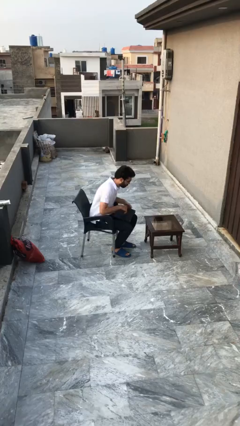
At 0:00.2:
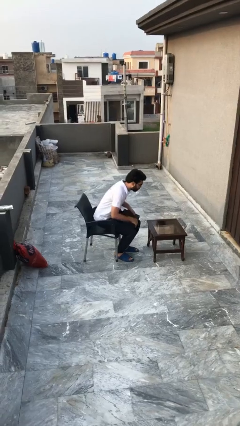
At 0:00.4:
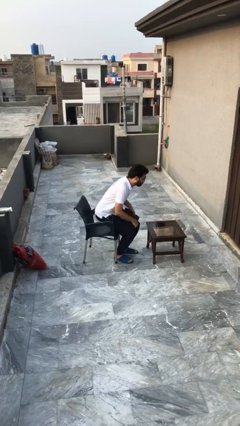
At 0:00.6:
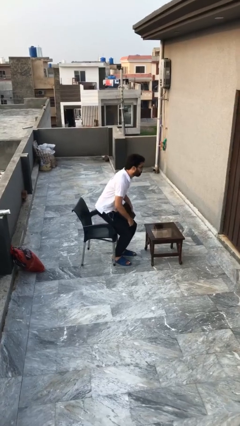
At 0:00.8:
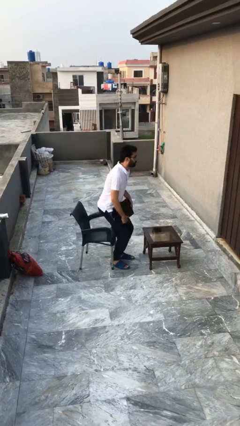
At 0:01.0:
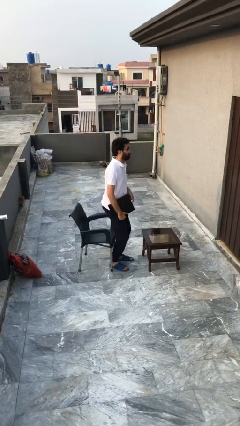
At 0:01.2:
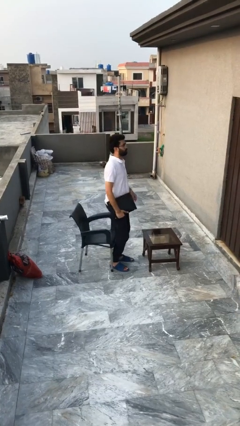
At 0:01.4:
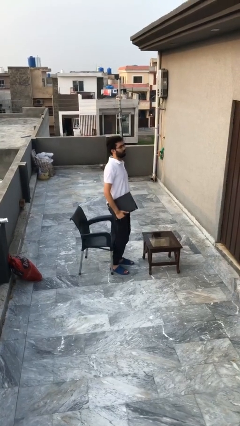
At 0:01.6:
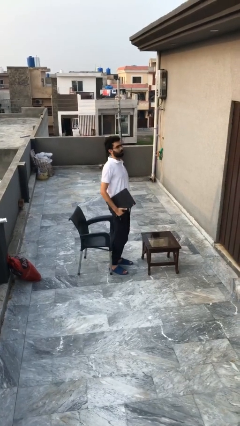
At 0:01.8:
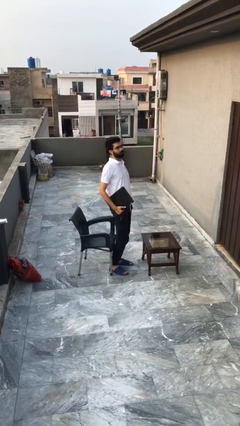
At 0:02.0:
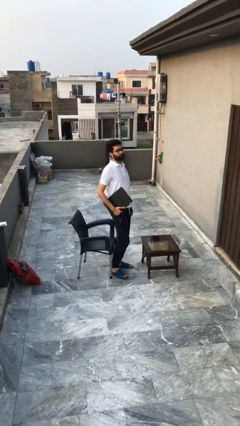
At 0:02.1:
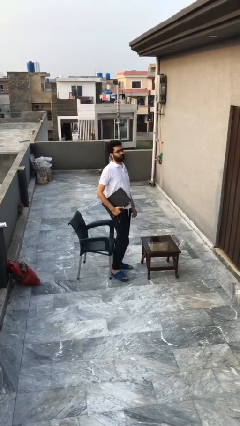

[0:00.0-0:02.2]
person stands up

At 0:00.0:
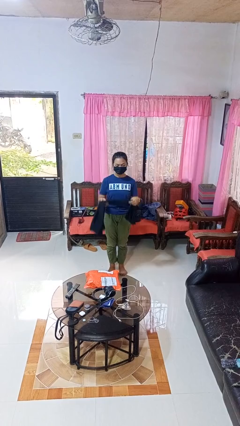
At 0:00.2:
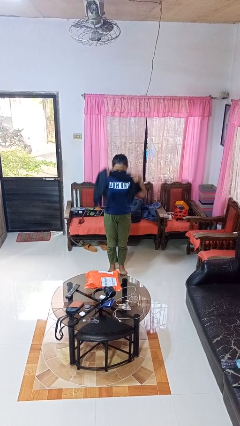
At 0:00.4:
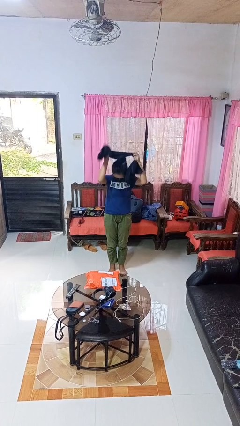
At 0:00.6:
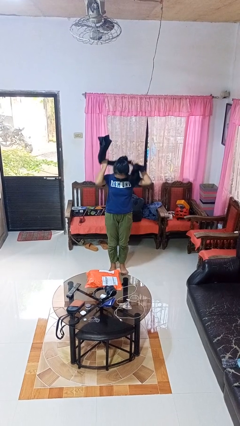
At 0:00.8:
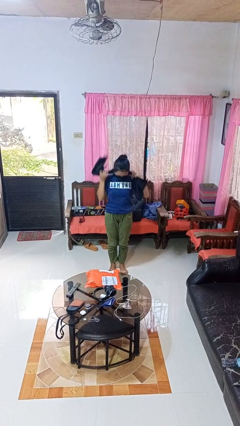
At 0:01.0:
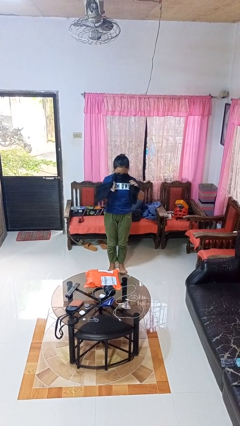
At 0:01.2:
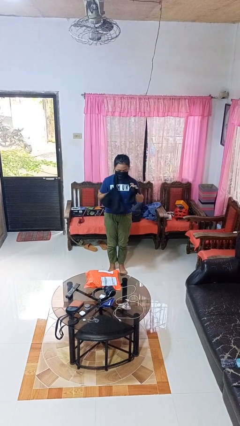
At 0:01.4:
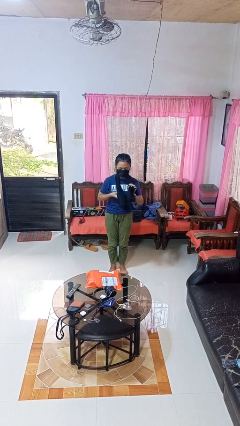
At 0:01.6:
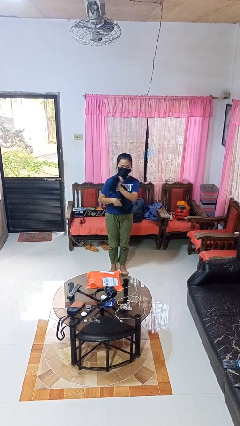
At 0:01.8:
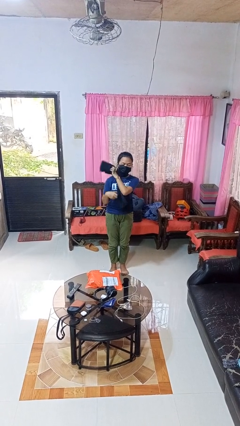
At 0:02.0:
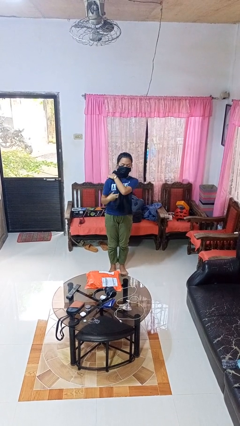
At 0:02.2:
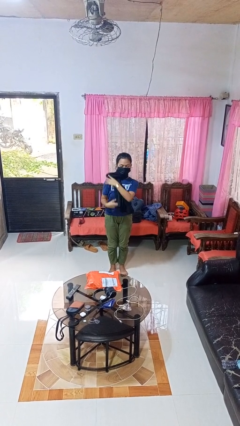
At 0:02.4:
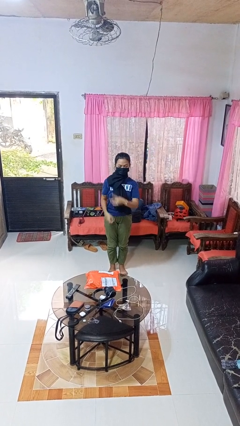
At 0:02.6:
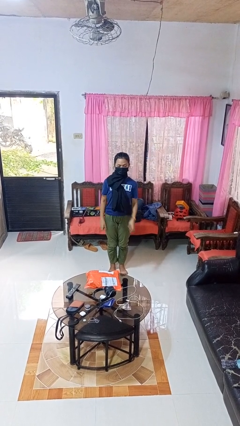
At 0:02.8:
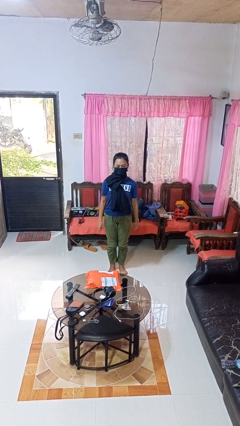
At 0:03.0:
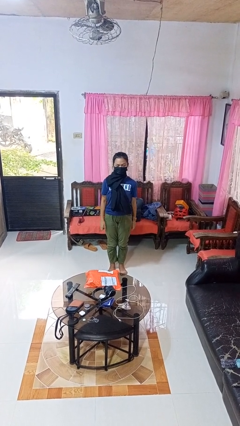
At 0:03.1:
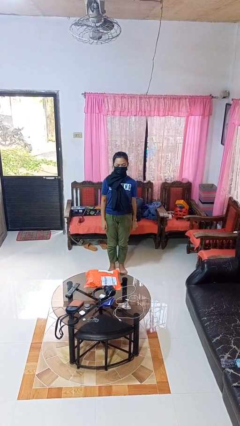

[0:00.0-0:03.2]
person puts on scarf

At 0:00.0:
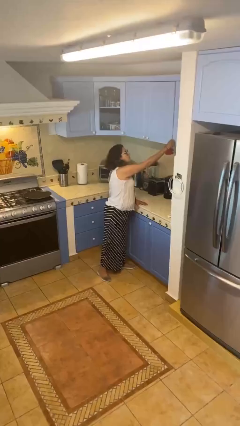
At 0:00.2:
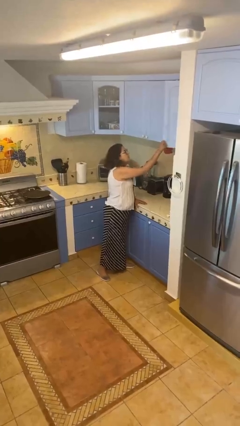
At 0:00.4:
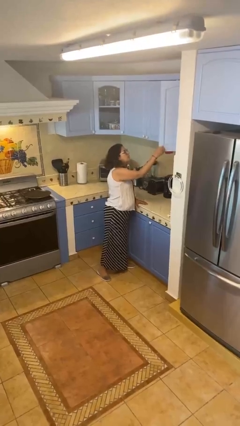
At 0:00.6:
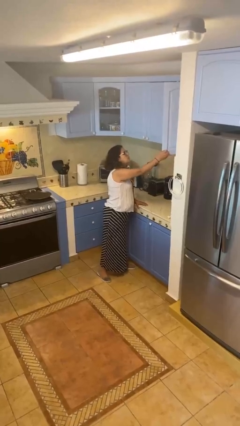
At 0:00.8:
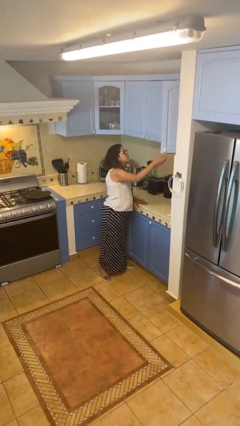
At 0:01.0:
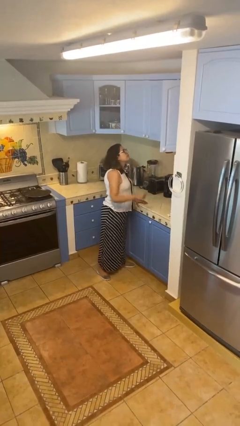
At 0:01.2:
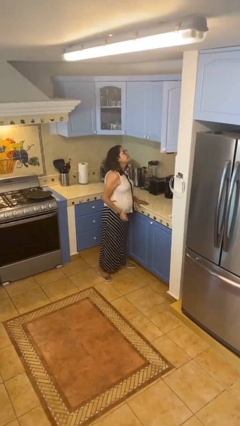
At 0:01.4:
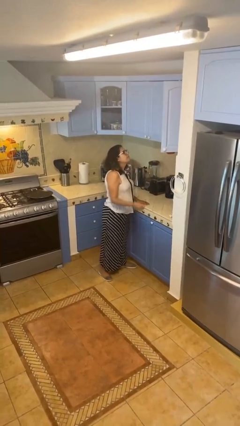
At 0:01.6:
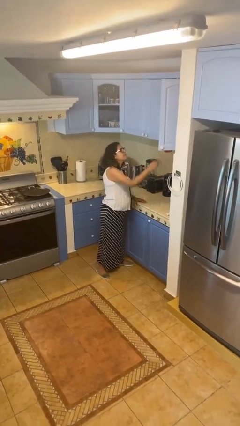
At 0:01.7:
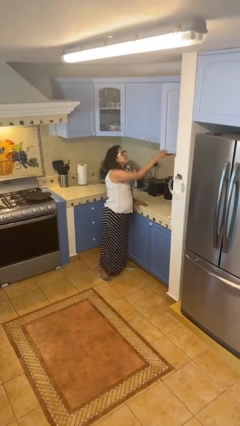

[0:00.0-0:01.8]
person opens cabinet

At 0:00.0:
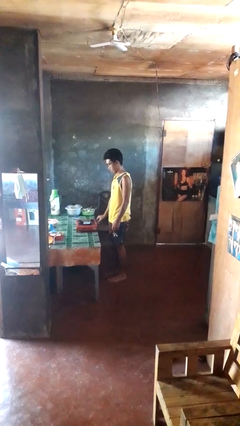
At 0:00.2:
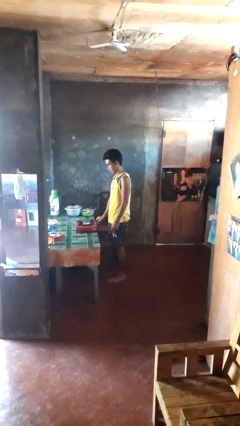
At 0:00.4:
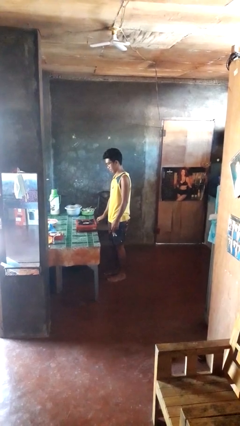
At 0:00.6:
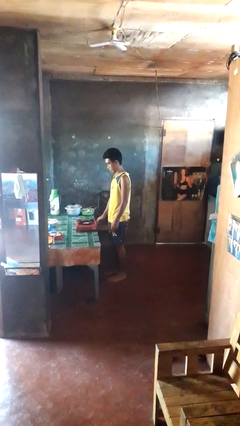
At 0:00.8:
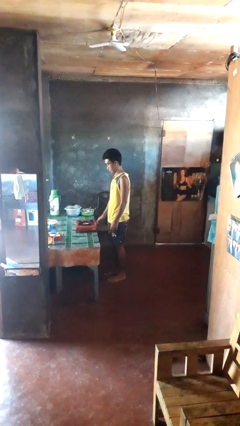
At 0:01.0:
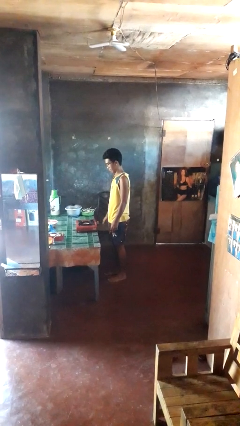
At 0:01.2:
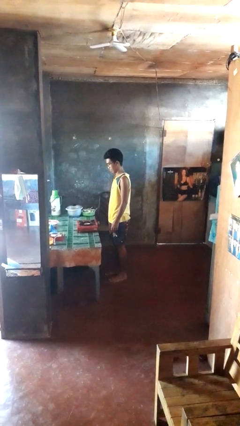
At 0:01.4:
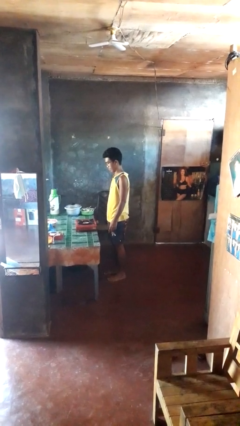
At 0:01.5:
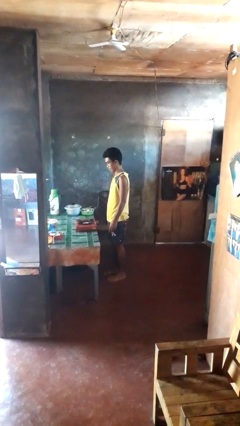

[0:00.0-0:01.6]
person turns off stovetop

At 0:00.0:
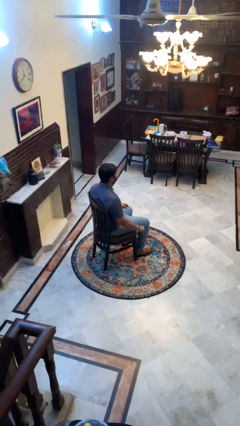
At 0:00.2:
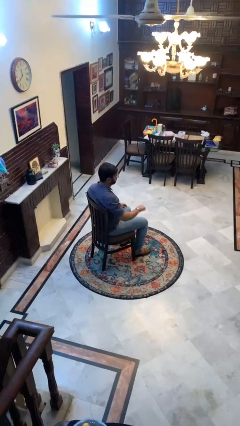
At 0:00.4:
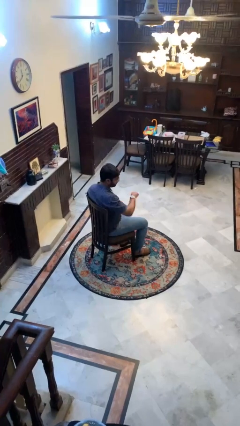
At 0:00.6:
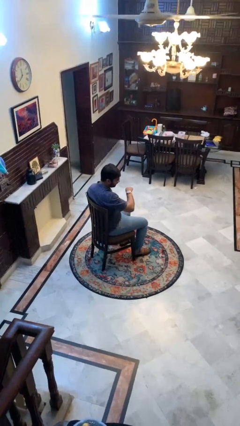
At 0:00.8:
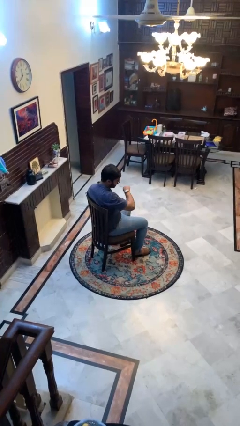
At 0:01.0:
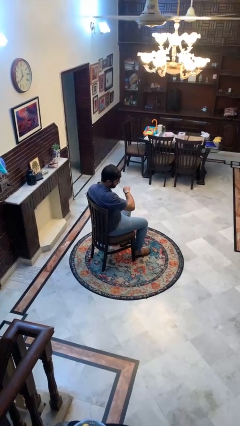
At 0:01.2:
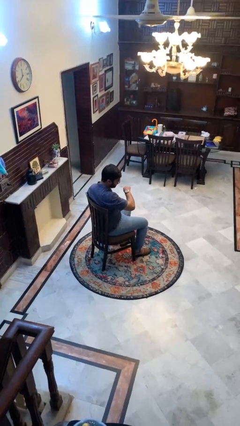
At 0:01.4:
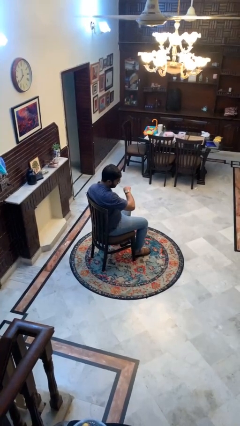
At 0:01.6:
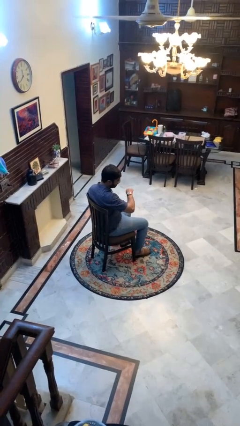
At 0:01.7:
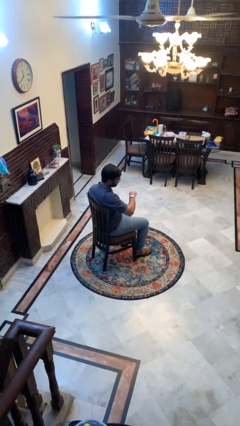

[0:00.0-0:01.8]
person looks at wristwatch

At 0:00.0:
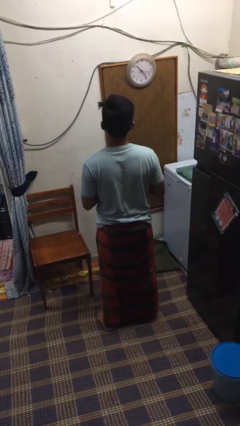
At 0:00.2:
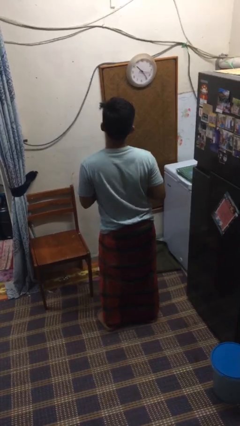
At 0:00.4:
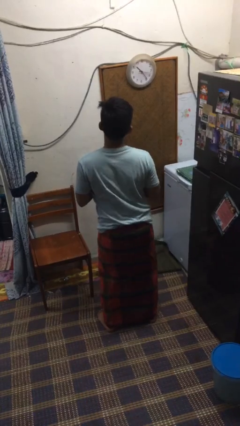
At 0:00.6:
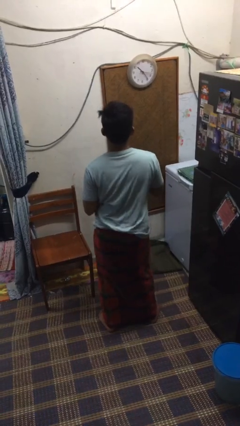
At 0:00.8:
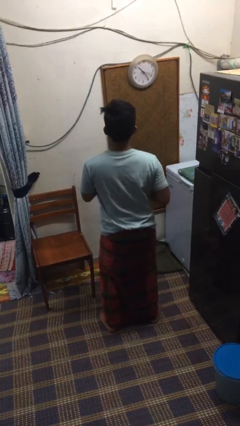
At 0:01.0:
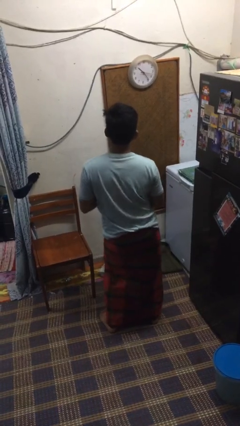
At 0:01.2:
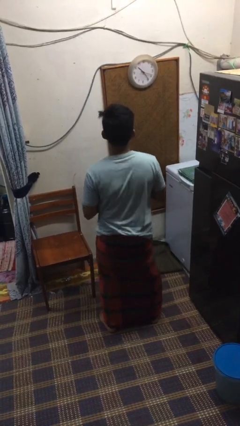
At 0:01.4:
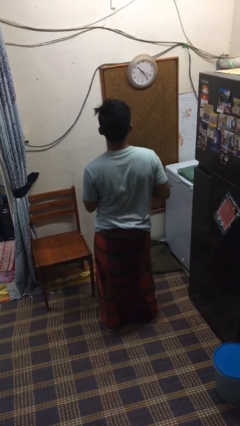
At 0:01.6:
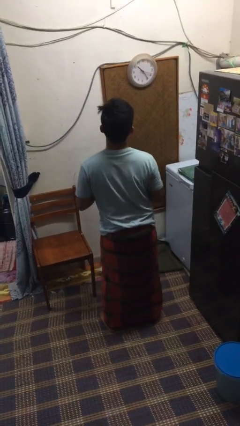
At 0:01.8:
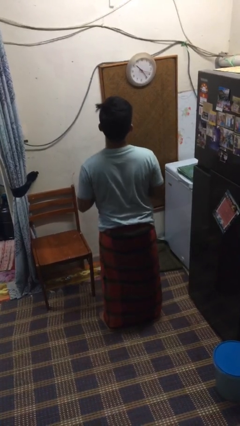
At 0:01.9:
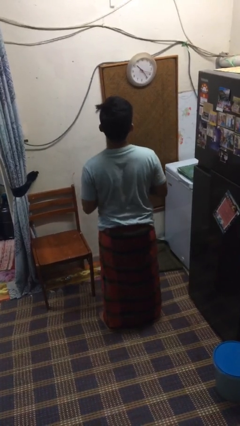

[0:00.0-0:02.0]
person wiggles hips

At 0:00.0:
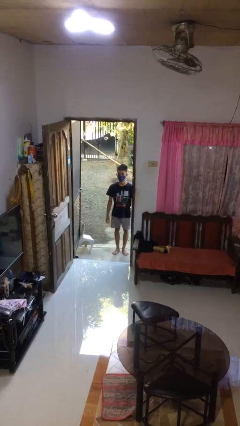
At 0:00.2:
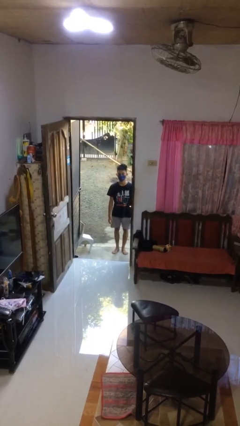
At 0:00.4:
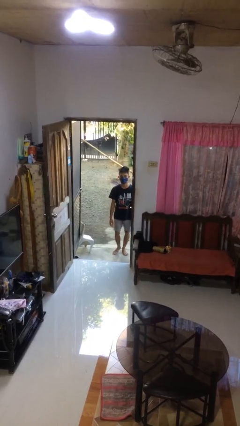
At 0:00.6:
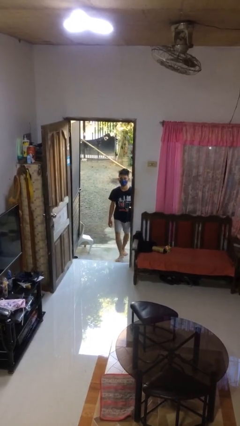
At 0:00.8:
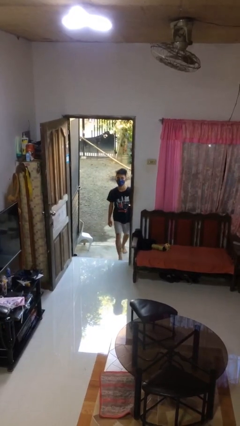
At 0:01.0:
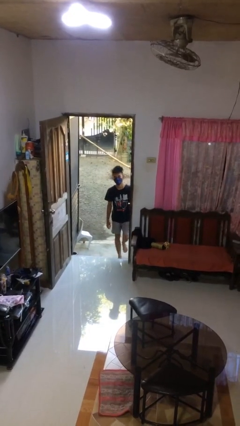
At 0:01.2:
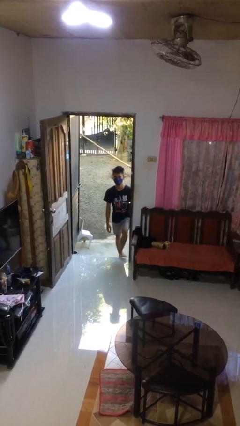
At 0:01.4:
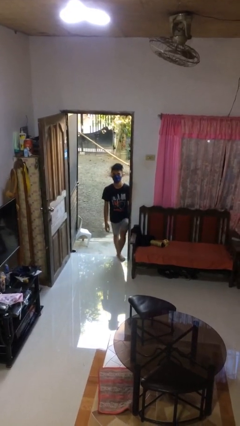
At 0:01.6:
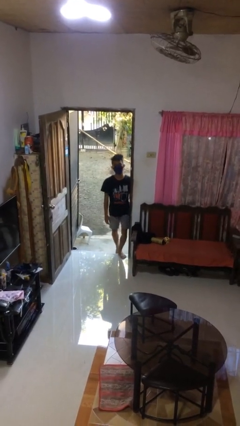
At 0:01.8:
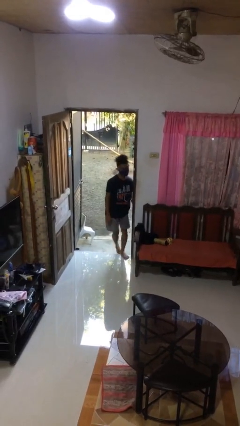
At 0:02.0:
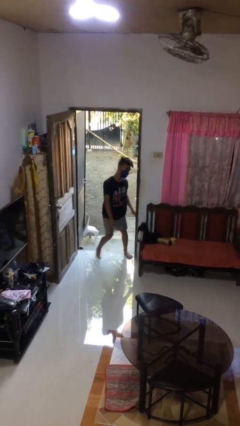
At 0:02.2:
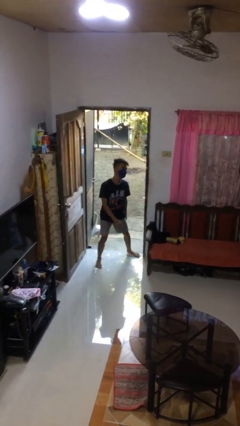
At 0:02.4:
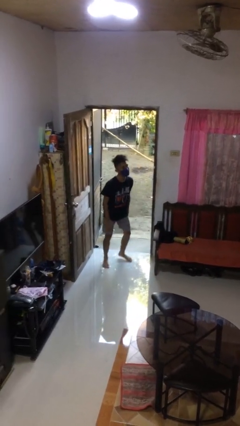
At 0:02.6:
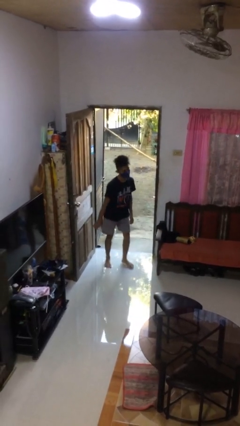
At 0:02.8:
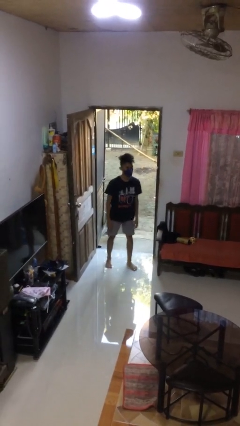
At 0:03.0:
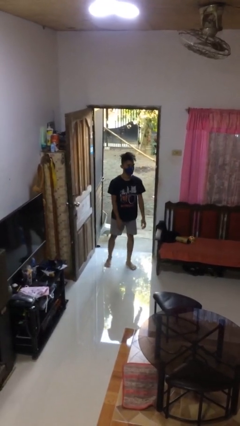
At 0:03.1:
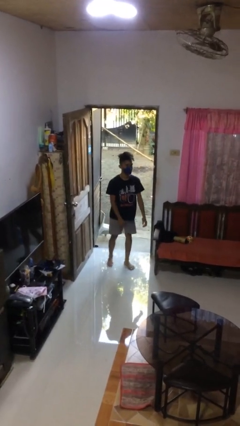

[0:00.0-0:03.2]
person bumps into wall

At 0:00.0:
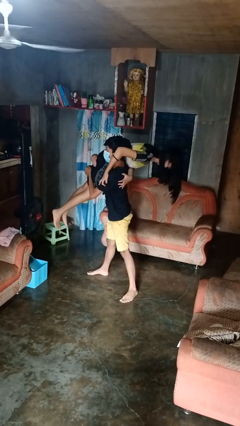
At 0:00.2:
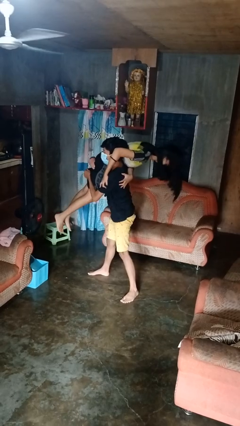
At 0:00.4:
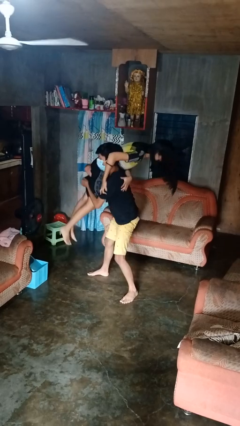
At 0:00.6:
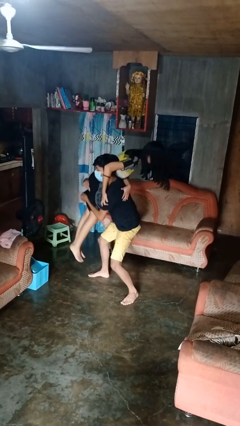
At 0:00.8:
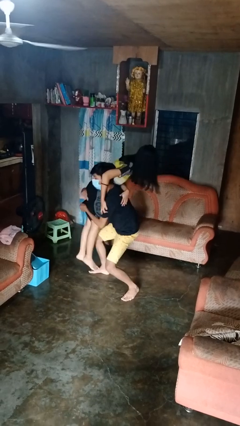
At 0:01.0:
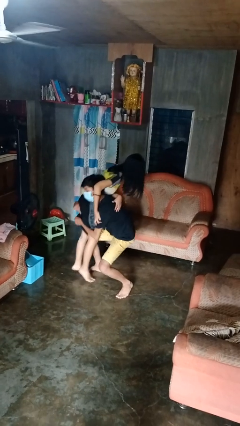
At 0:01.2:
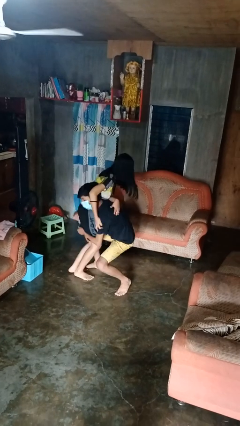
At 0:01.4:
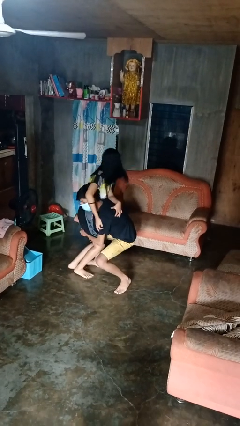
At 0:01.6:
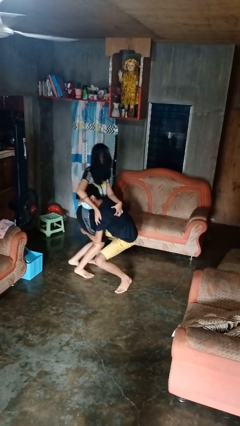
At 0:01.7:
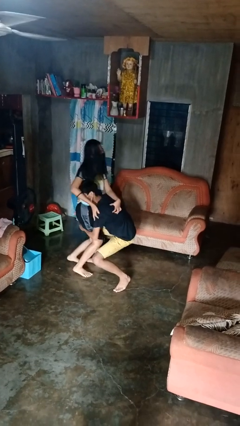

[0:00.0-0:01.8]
person puts down person
